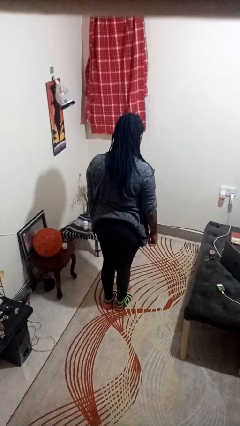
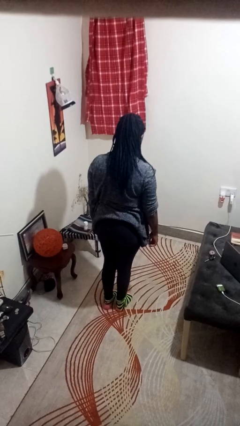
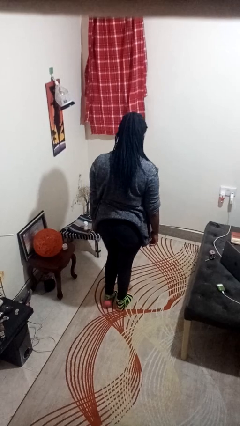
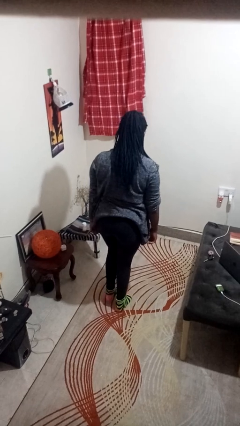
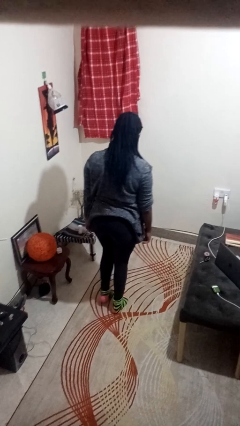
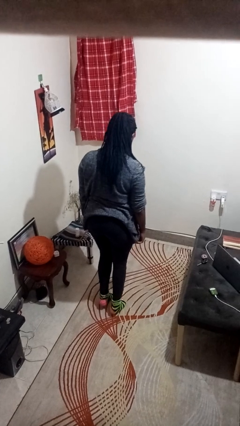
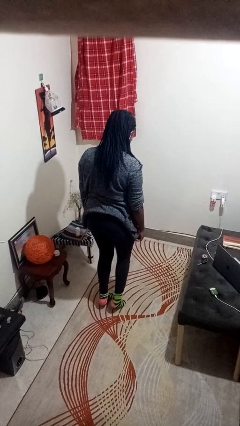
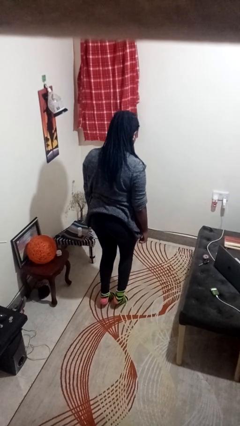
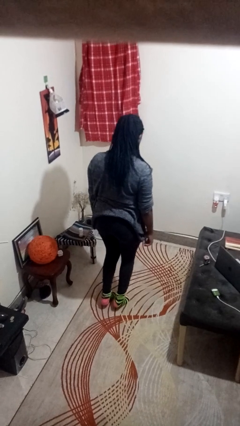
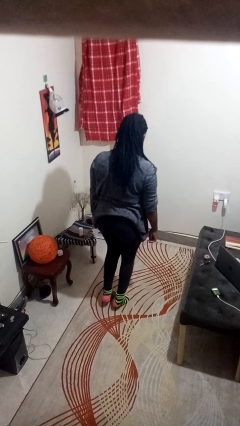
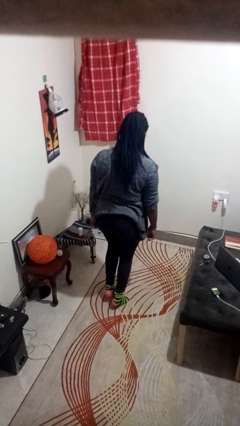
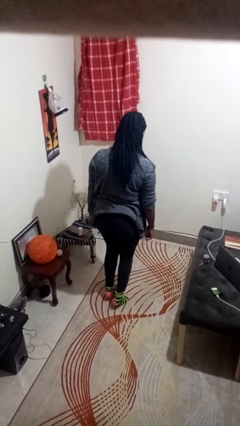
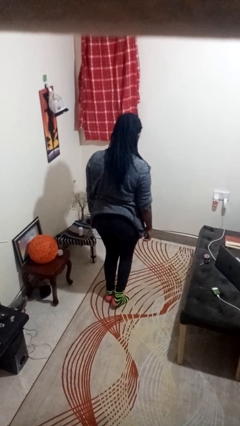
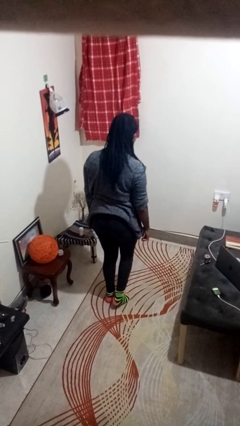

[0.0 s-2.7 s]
person walks tiptoe

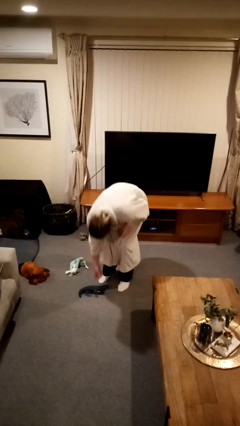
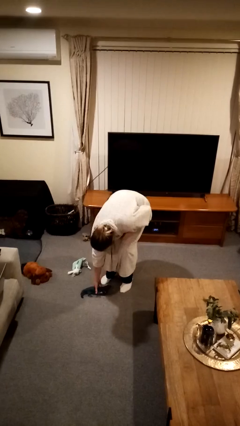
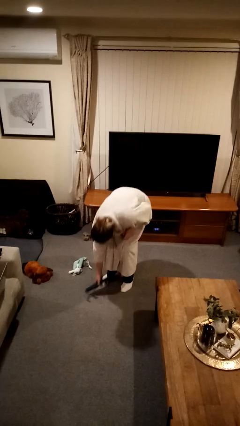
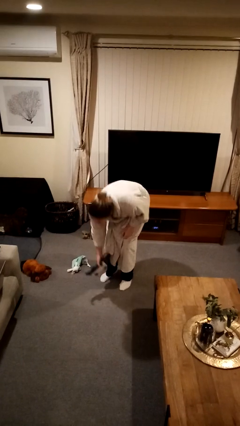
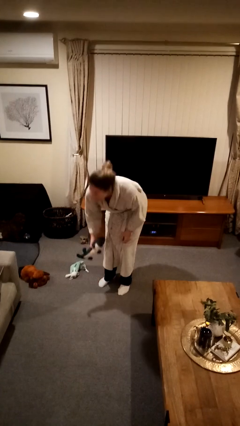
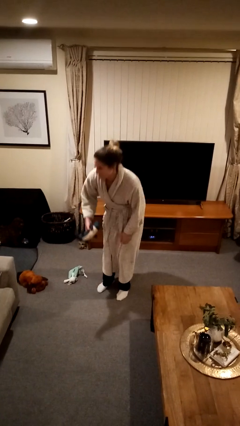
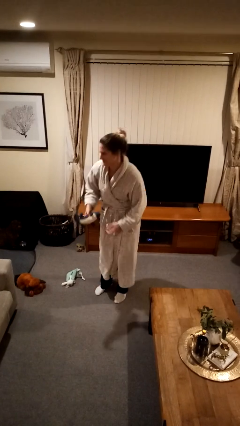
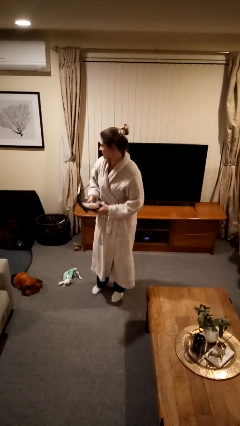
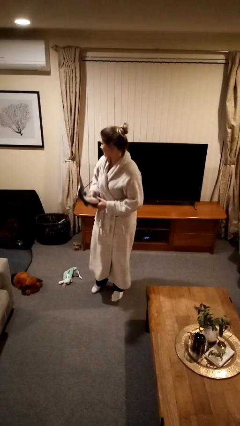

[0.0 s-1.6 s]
person picks up object from floor

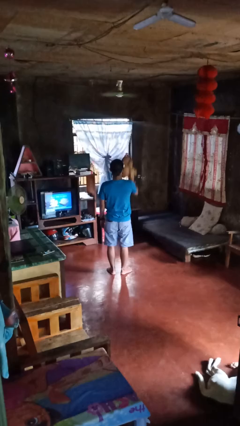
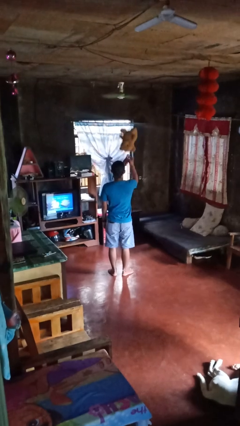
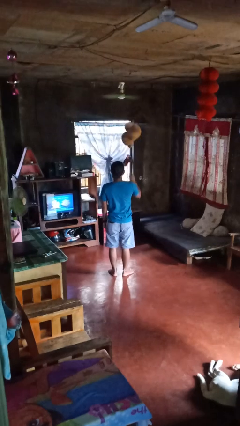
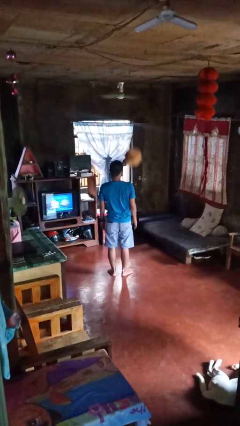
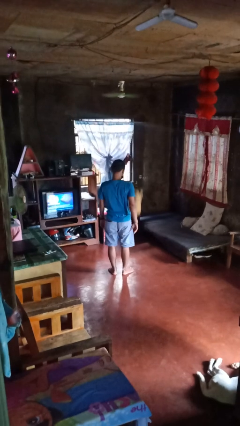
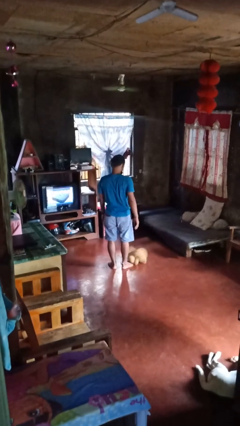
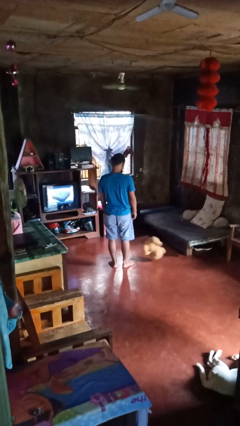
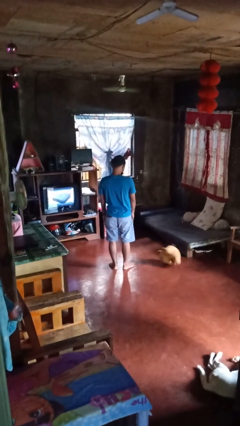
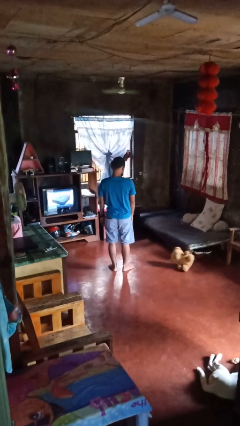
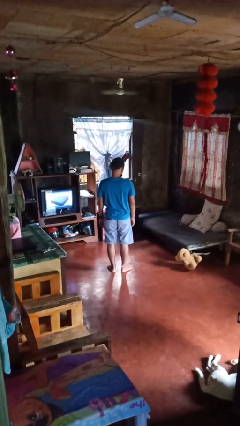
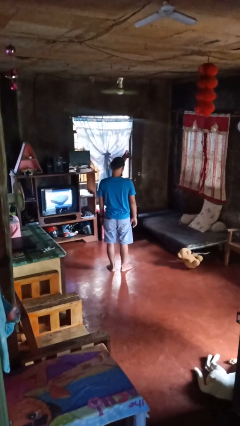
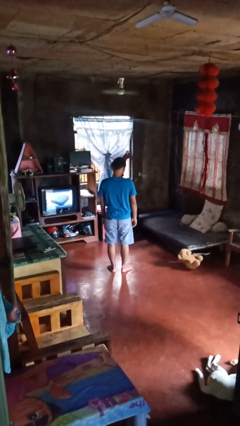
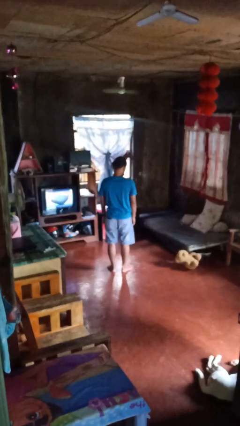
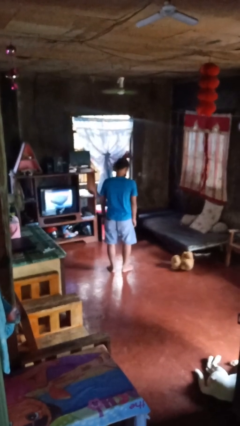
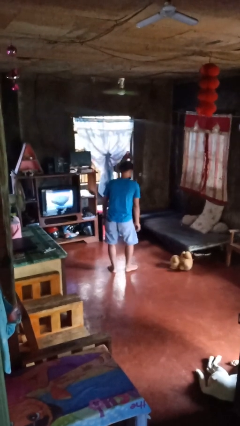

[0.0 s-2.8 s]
person throws object into air

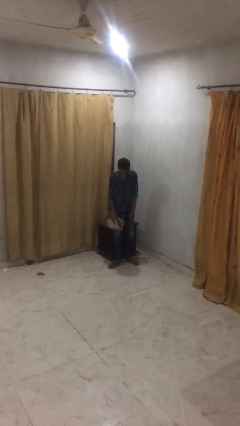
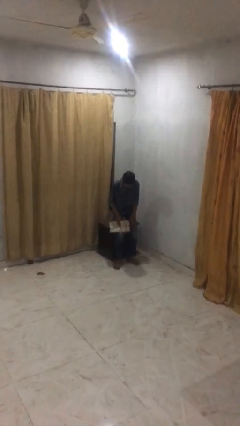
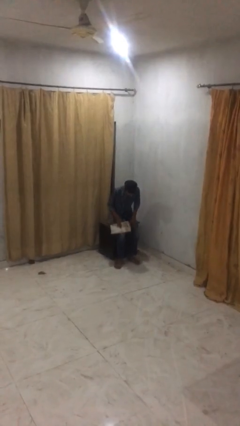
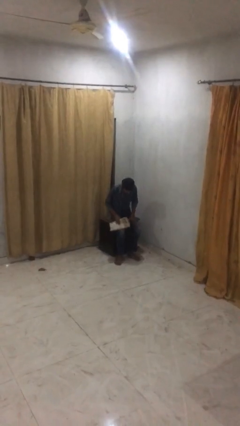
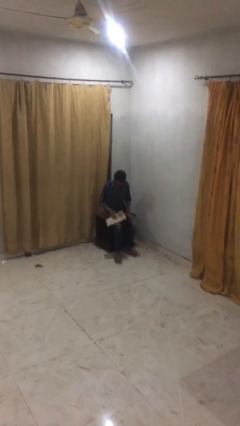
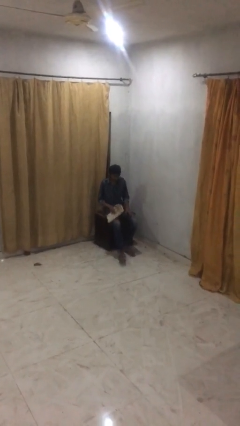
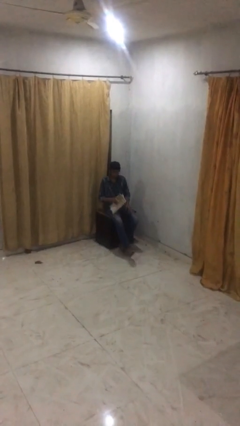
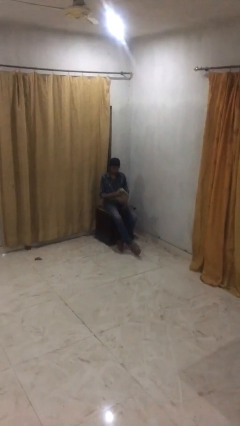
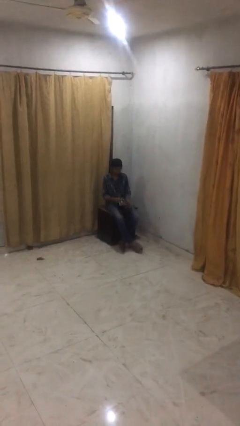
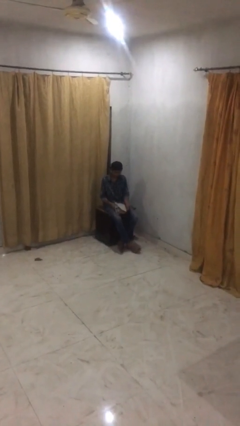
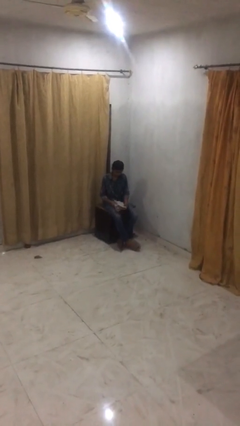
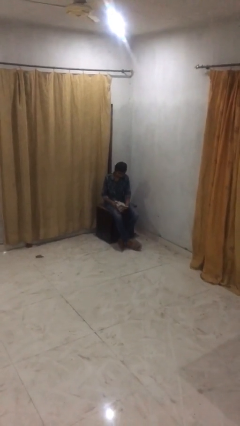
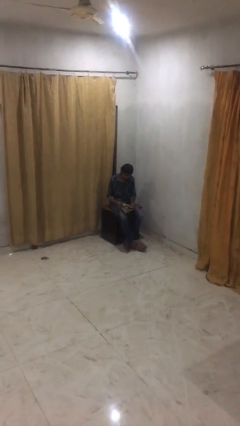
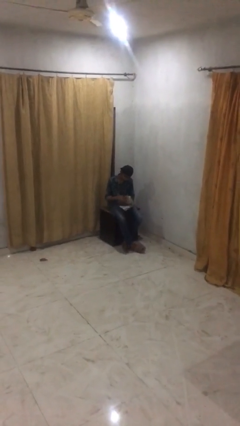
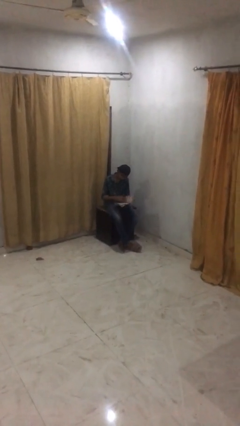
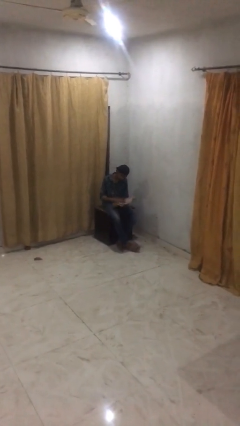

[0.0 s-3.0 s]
person sits down

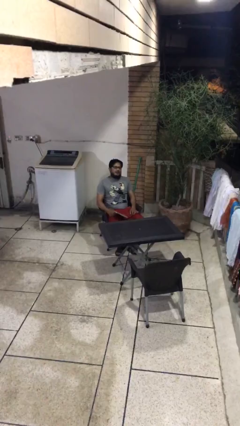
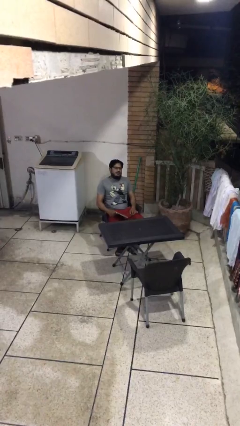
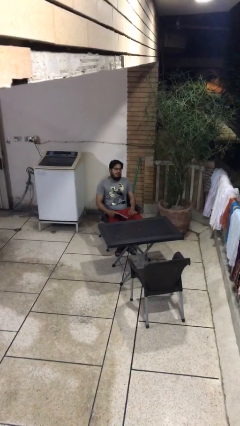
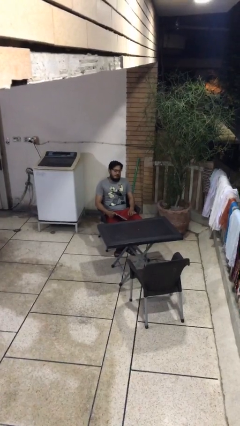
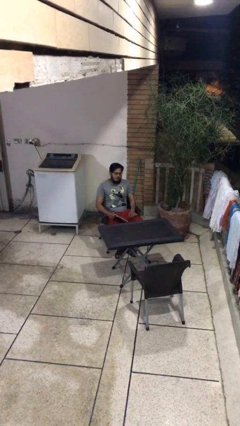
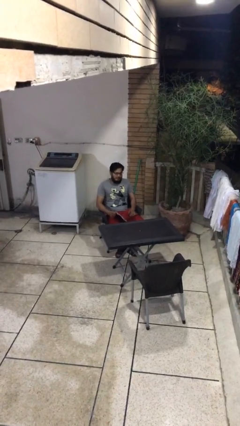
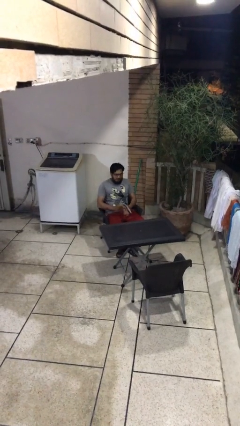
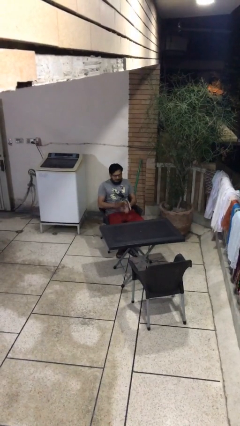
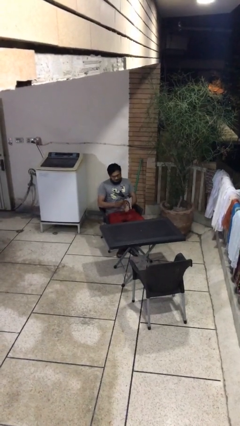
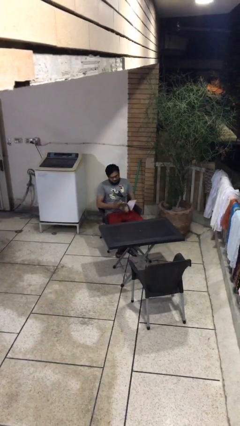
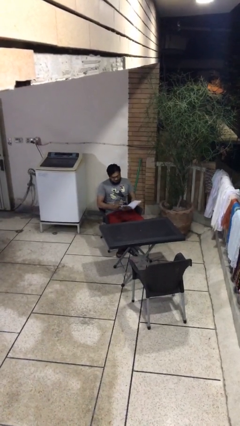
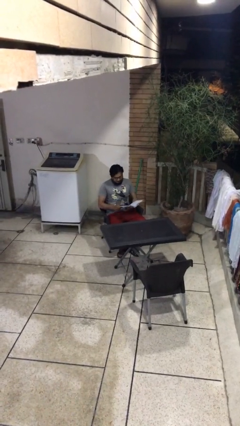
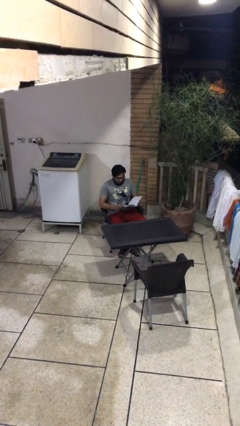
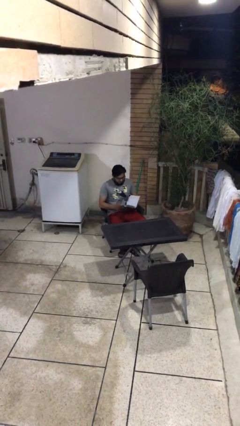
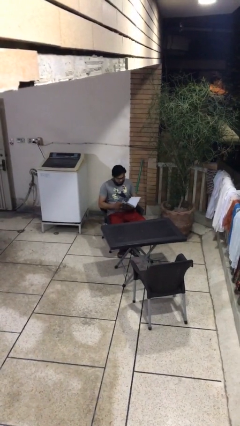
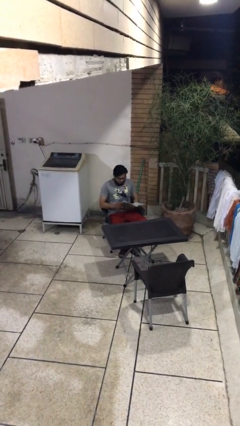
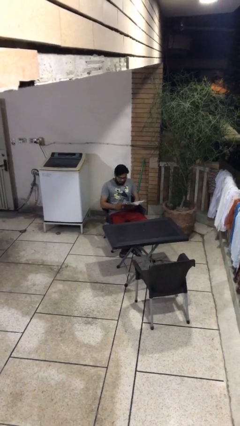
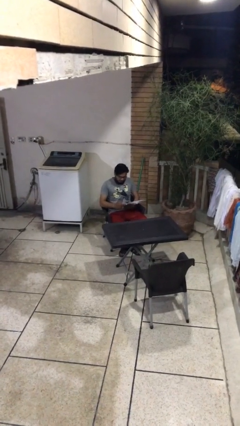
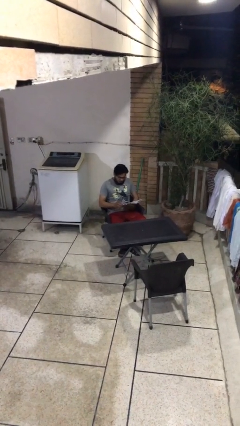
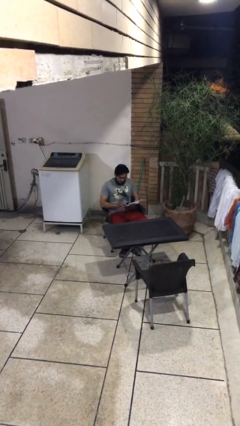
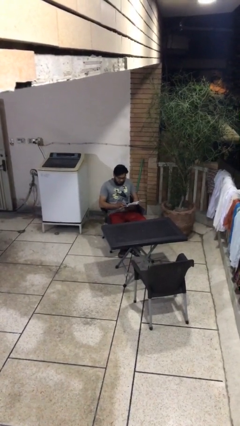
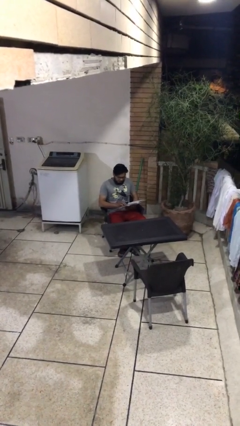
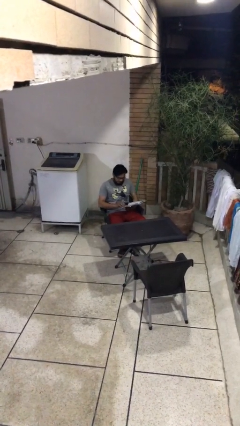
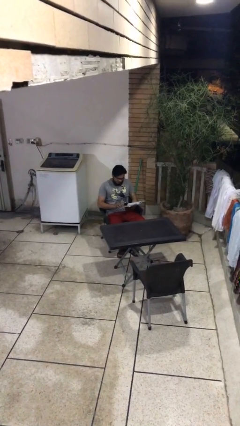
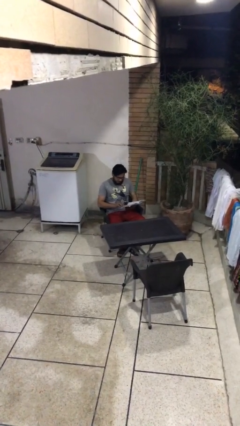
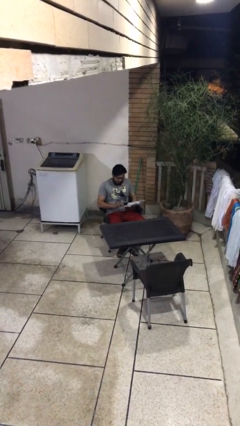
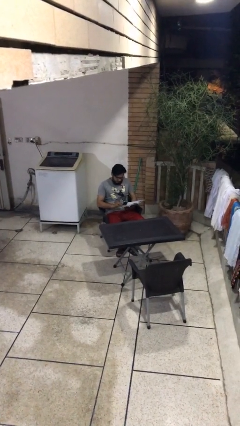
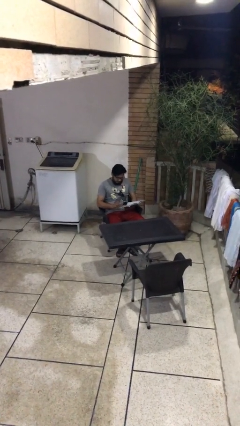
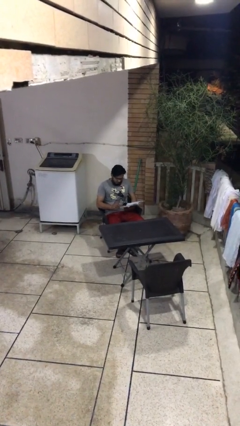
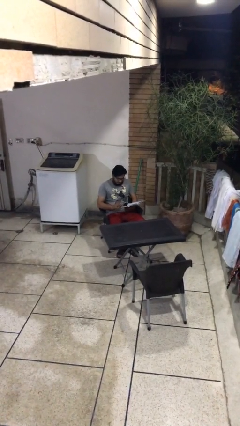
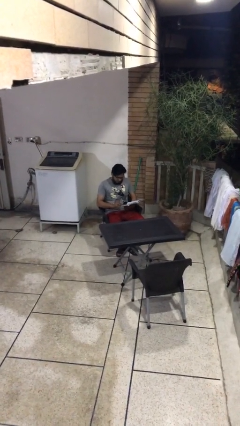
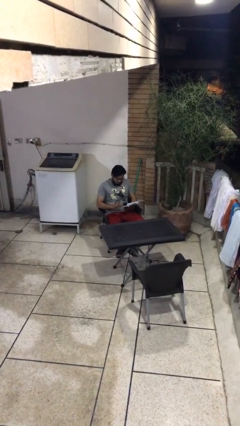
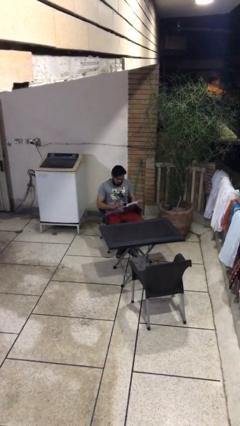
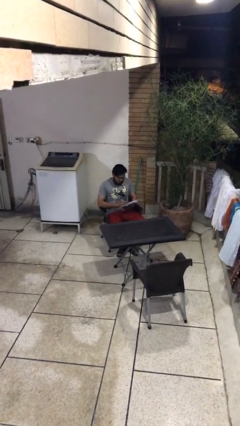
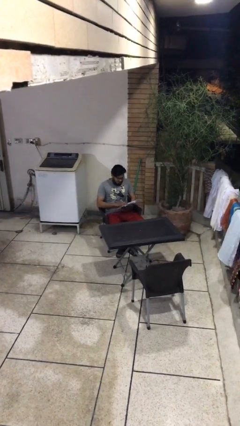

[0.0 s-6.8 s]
person reads document

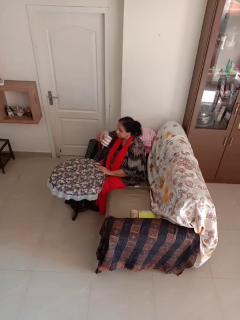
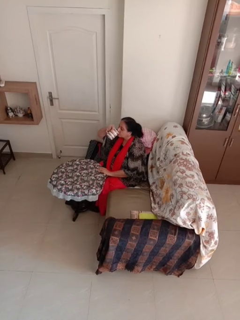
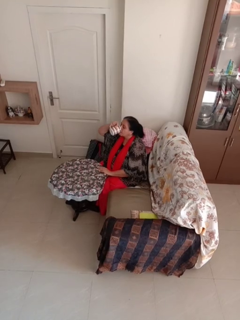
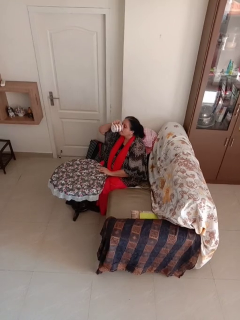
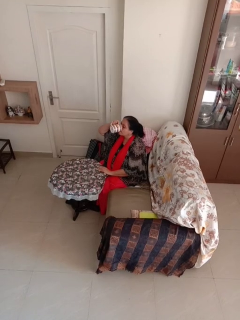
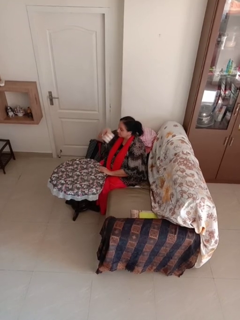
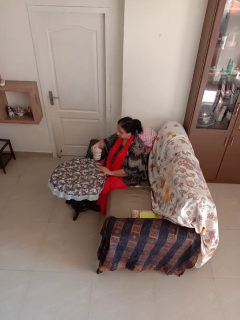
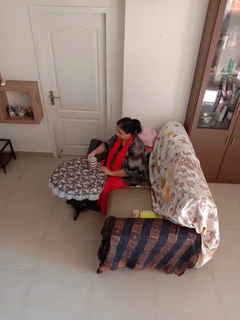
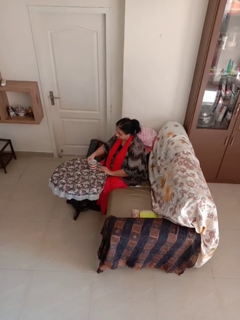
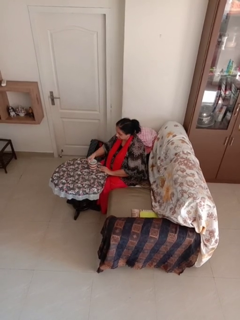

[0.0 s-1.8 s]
person drinks from mug
